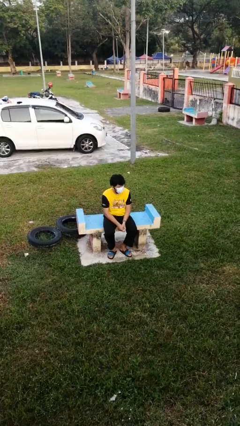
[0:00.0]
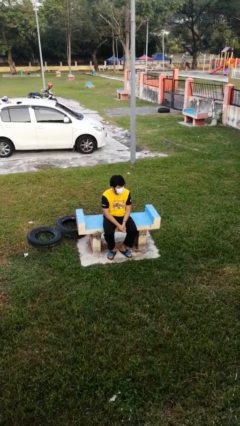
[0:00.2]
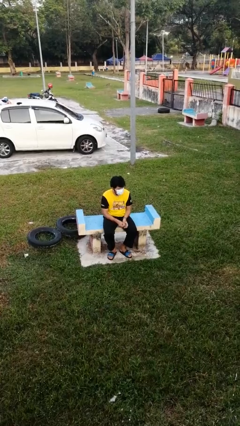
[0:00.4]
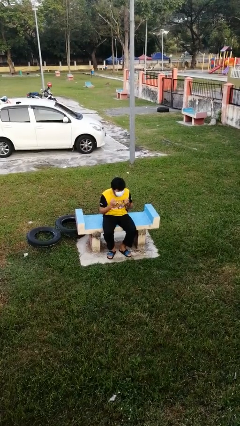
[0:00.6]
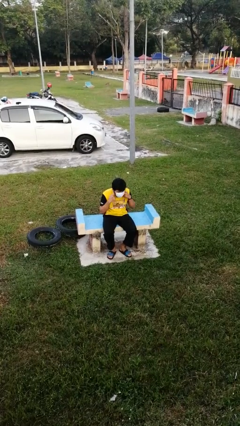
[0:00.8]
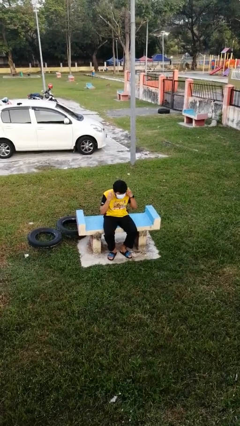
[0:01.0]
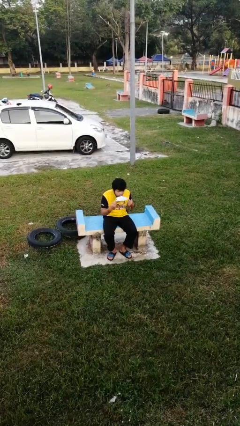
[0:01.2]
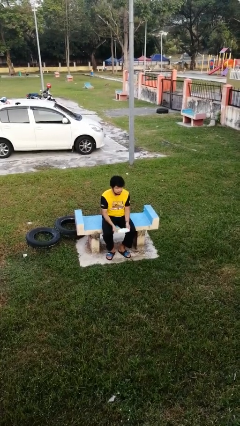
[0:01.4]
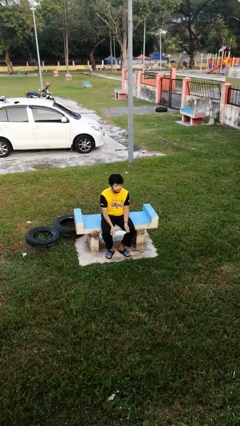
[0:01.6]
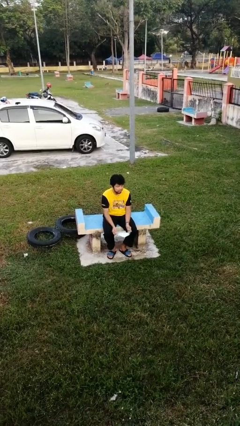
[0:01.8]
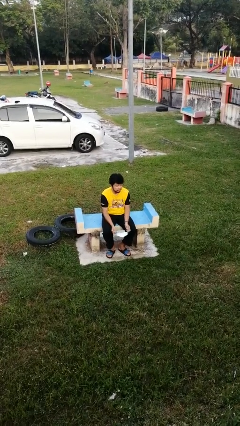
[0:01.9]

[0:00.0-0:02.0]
person takes off facemask

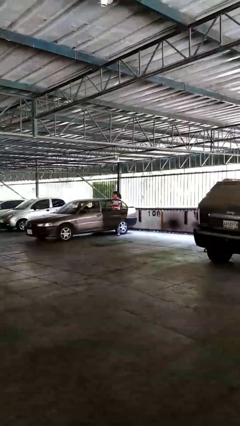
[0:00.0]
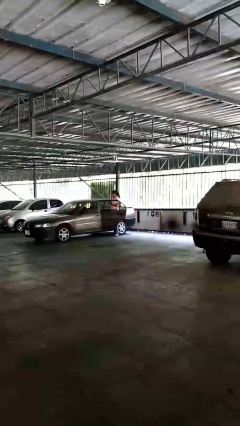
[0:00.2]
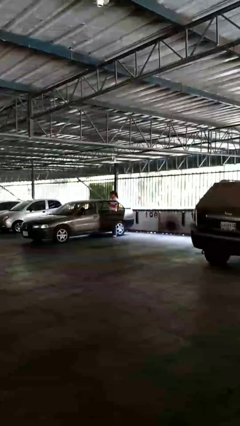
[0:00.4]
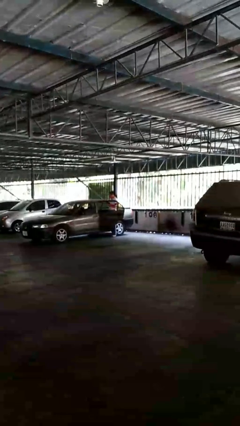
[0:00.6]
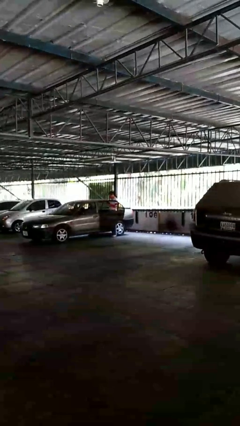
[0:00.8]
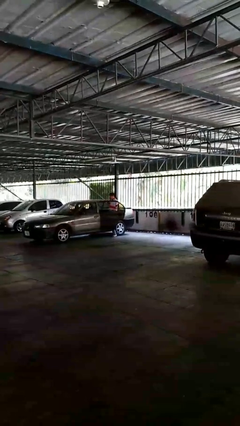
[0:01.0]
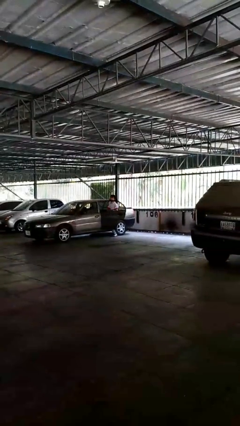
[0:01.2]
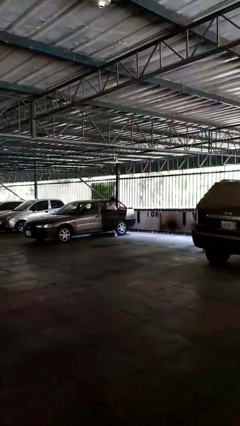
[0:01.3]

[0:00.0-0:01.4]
person exits car

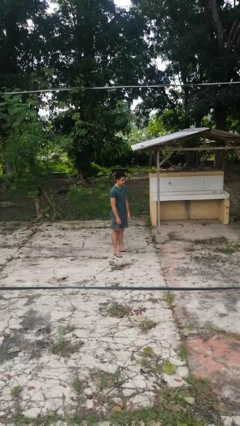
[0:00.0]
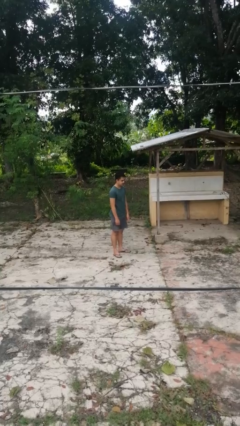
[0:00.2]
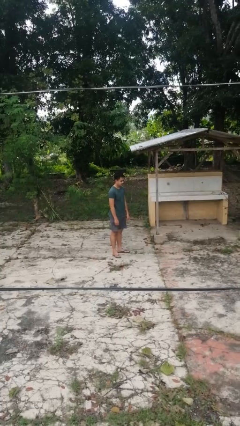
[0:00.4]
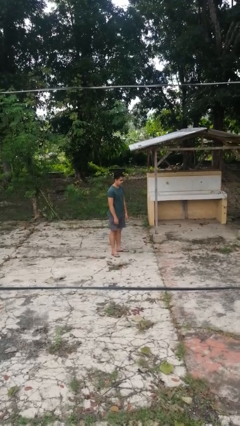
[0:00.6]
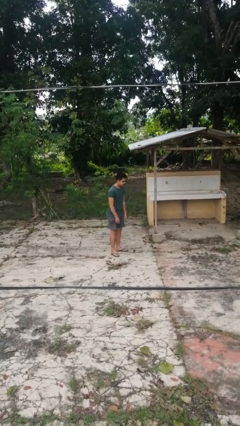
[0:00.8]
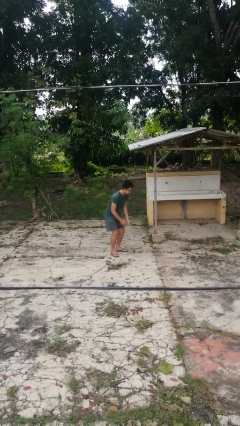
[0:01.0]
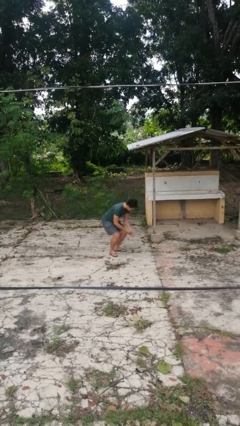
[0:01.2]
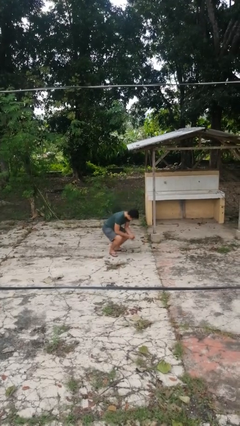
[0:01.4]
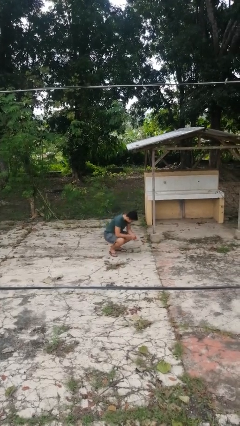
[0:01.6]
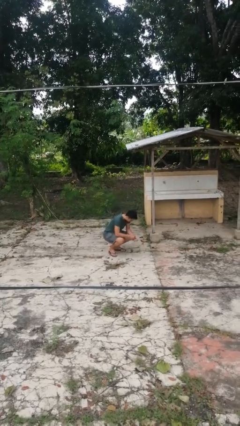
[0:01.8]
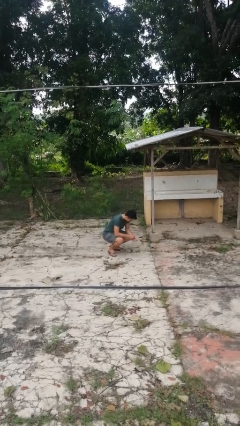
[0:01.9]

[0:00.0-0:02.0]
person squats

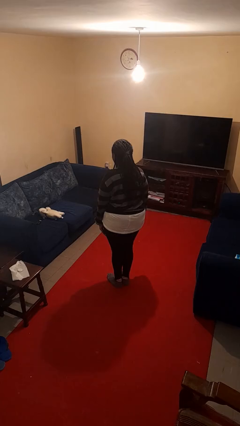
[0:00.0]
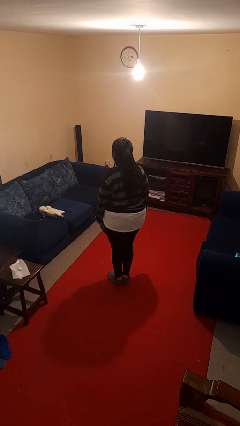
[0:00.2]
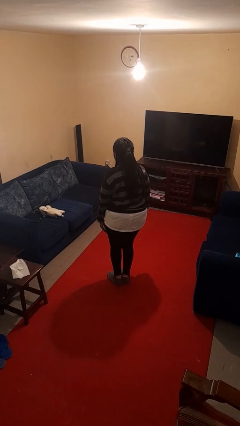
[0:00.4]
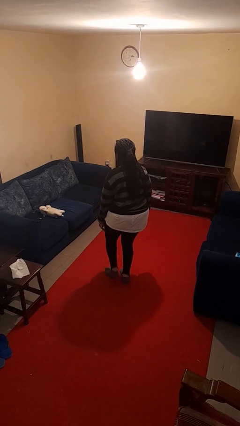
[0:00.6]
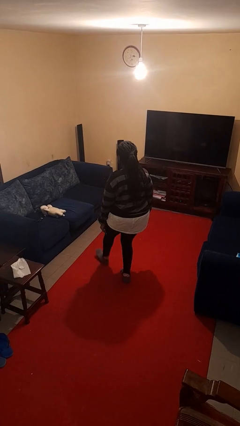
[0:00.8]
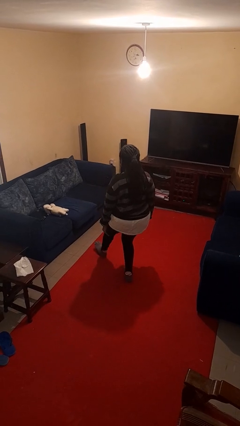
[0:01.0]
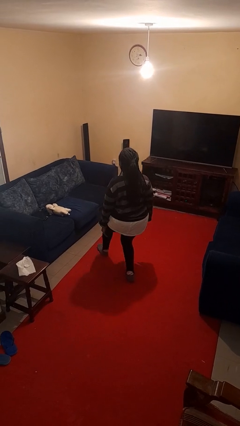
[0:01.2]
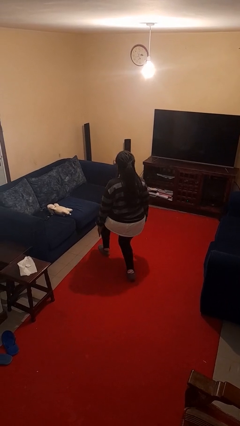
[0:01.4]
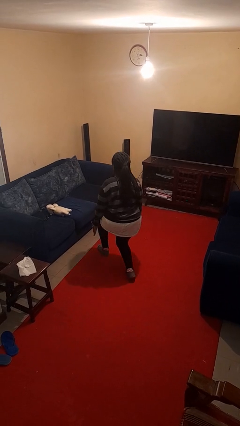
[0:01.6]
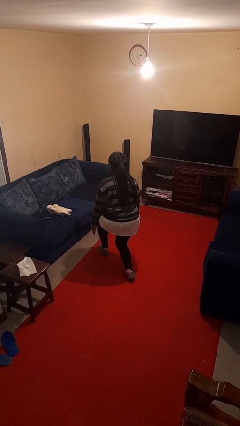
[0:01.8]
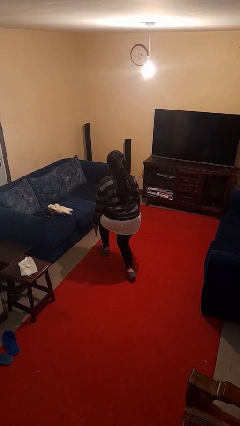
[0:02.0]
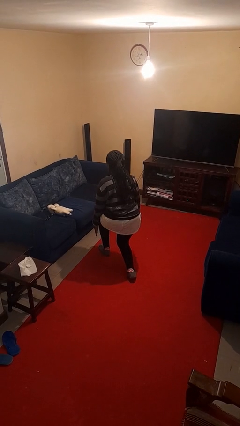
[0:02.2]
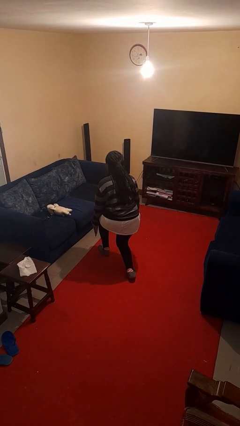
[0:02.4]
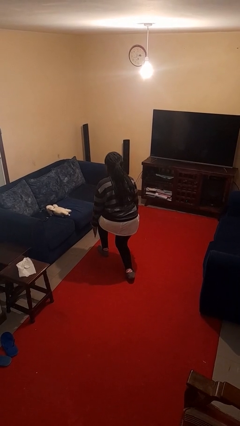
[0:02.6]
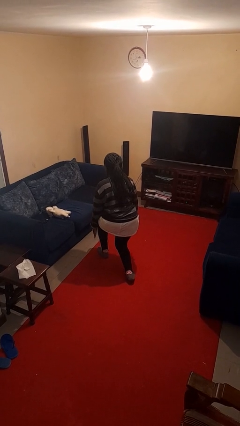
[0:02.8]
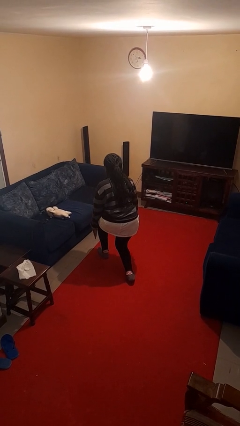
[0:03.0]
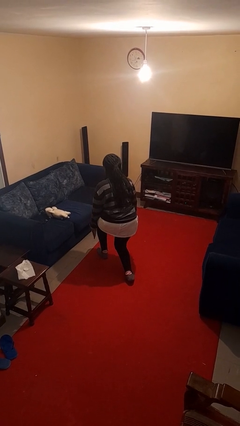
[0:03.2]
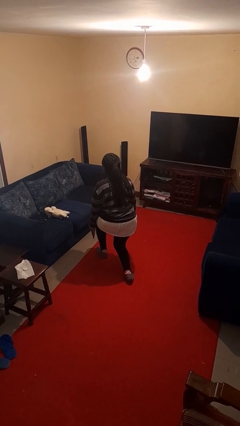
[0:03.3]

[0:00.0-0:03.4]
person exercises with lunges

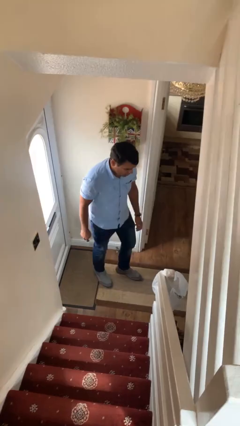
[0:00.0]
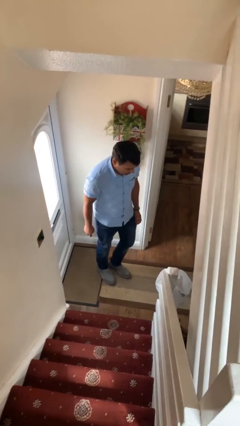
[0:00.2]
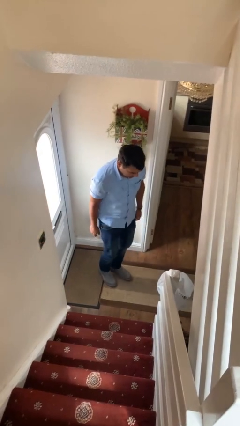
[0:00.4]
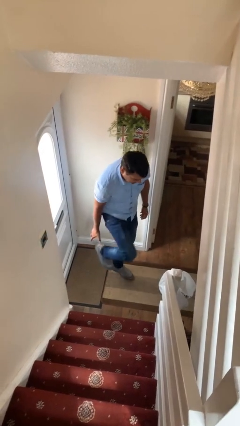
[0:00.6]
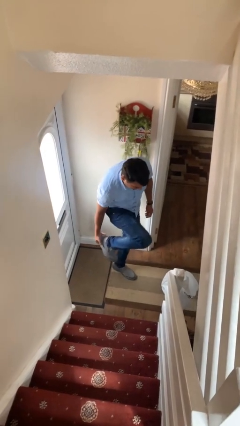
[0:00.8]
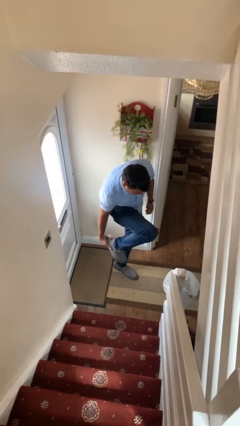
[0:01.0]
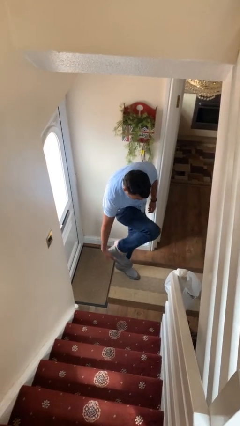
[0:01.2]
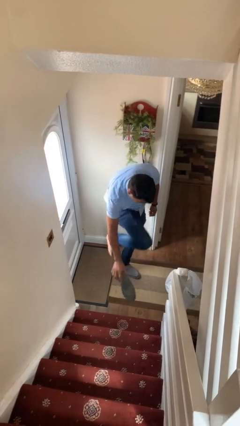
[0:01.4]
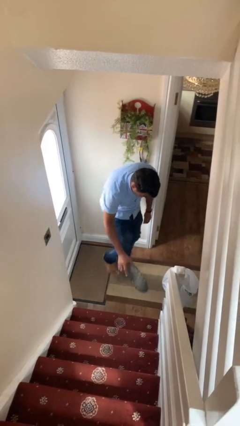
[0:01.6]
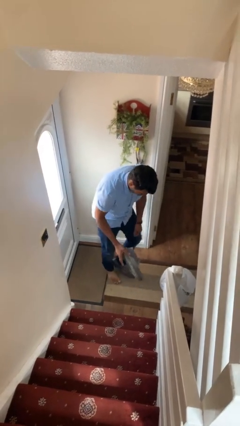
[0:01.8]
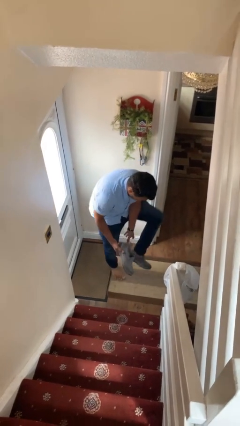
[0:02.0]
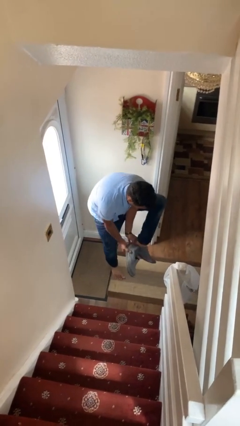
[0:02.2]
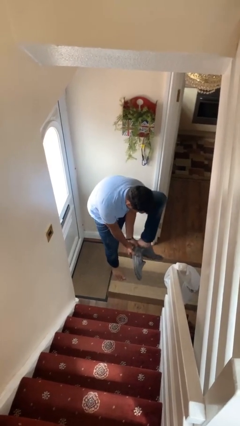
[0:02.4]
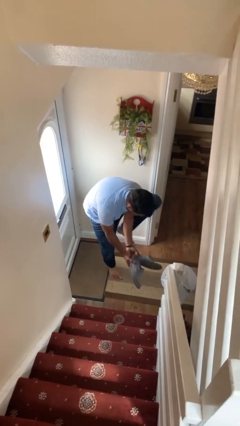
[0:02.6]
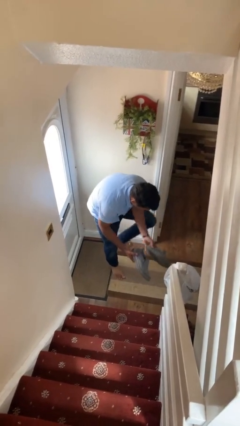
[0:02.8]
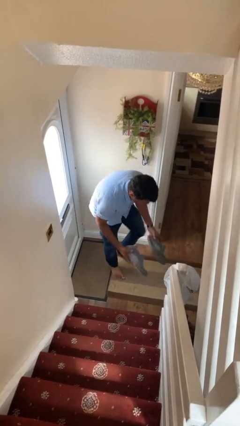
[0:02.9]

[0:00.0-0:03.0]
person takes off shoes

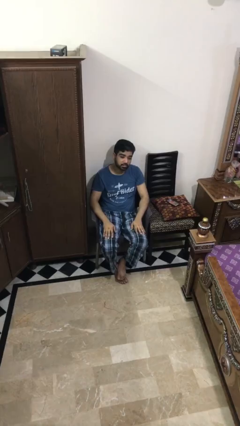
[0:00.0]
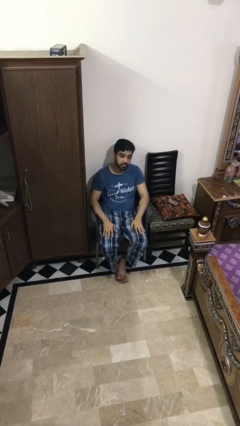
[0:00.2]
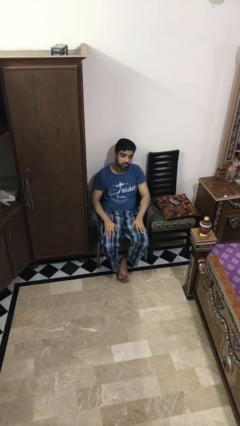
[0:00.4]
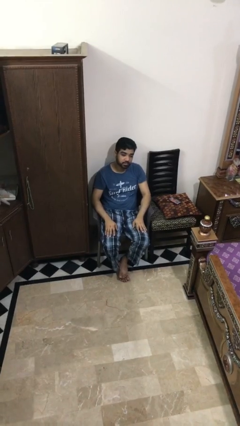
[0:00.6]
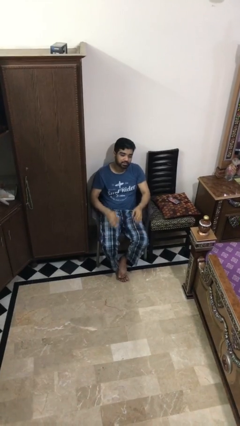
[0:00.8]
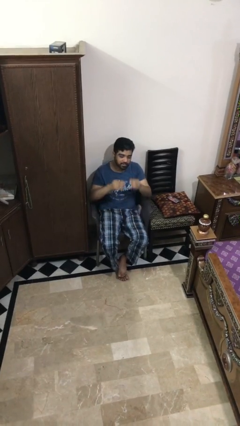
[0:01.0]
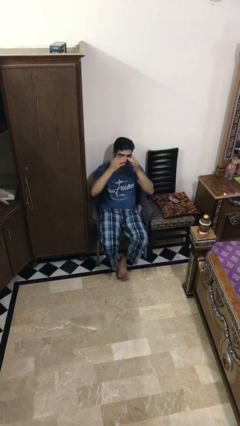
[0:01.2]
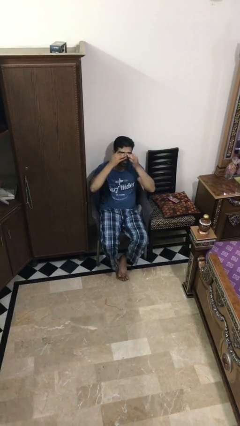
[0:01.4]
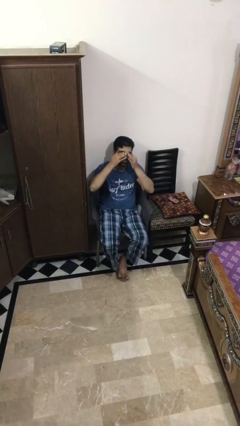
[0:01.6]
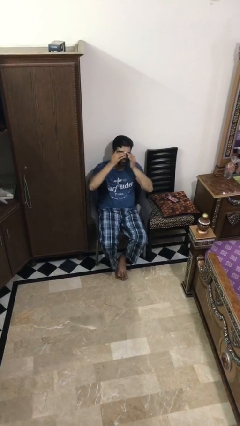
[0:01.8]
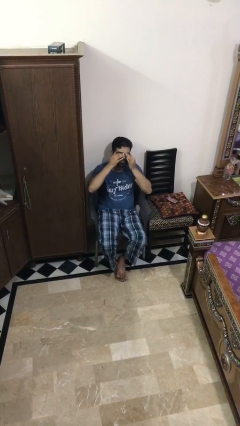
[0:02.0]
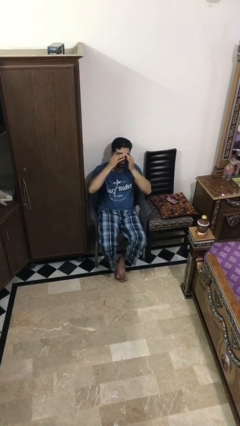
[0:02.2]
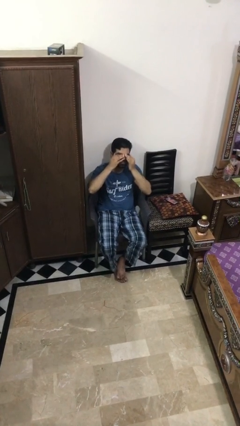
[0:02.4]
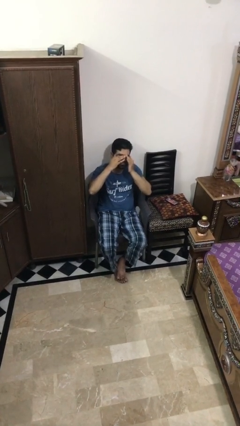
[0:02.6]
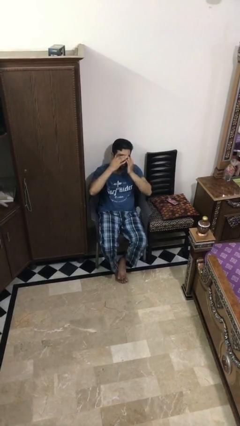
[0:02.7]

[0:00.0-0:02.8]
person rubs eyes

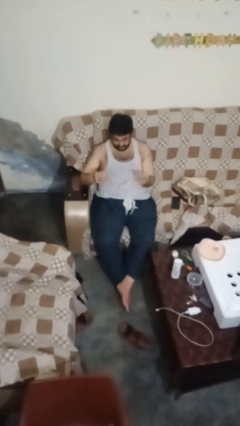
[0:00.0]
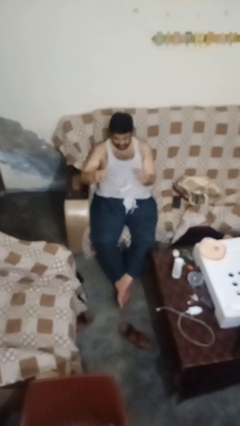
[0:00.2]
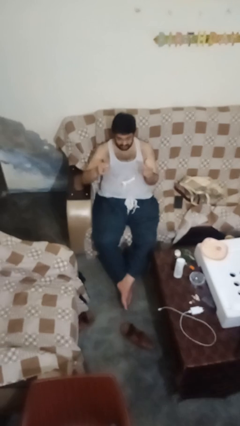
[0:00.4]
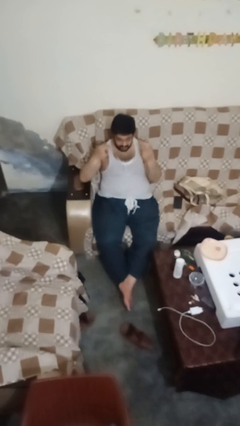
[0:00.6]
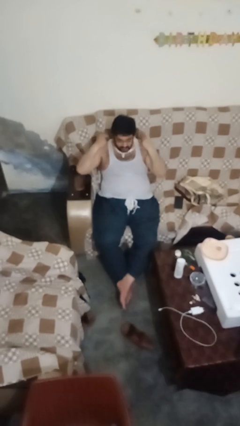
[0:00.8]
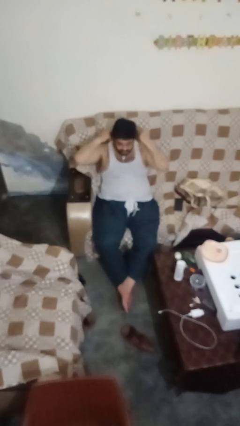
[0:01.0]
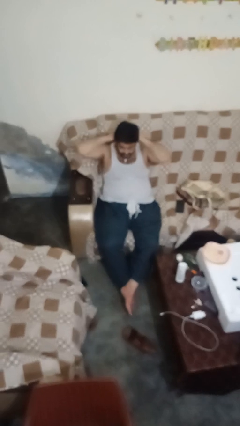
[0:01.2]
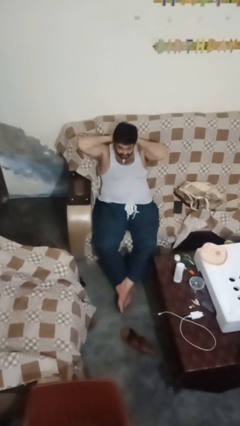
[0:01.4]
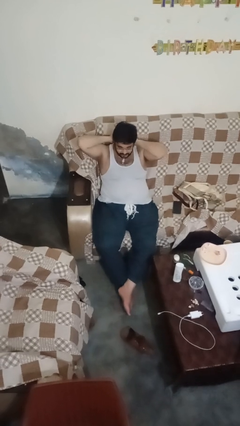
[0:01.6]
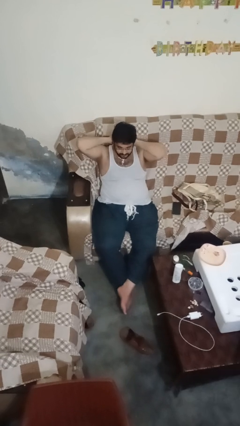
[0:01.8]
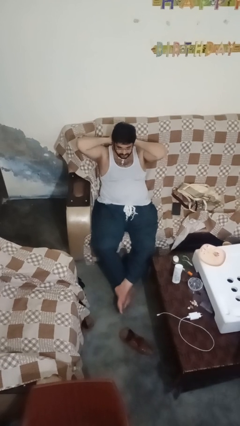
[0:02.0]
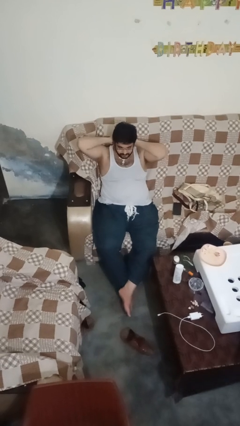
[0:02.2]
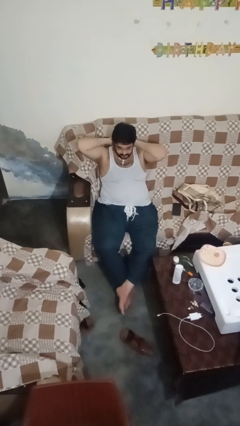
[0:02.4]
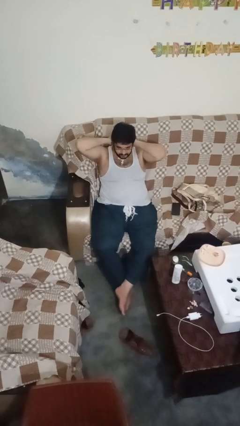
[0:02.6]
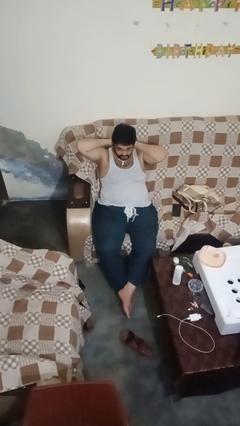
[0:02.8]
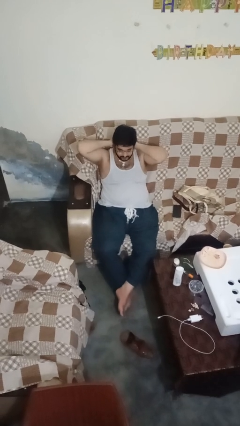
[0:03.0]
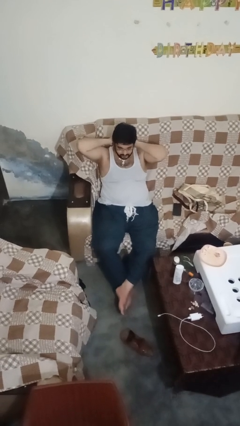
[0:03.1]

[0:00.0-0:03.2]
person puts on necklace
